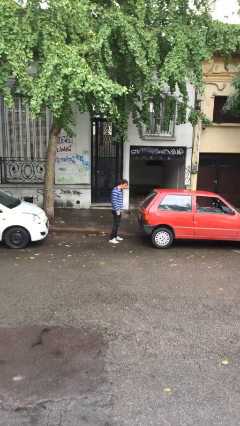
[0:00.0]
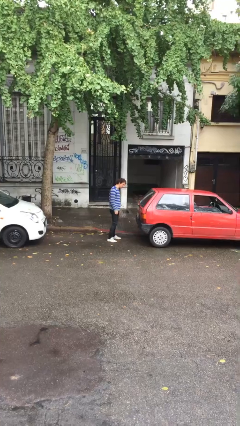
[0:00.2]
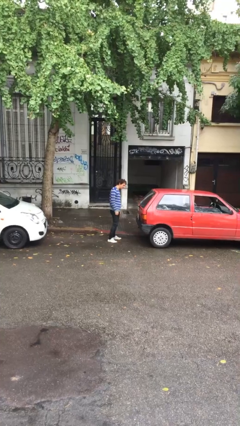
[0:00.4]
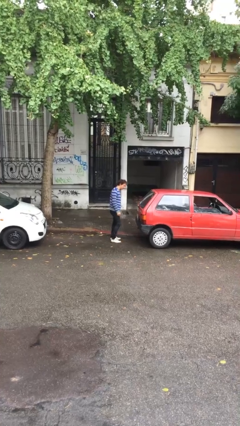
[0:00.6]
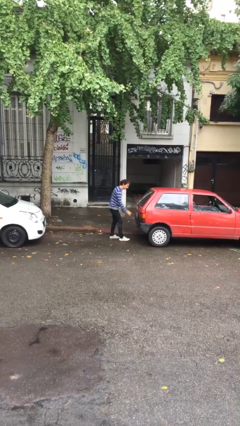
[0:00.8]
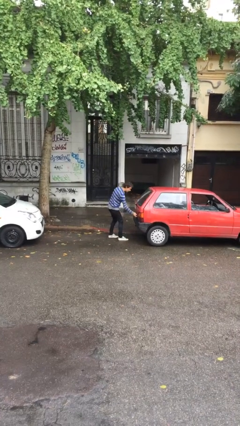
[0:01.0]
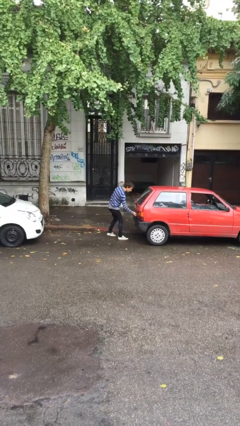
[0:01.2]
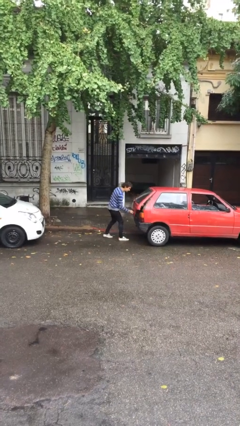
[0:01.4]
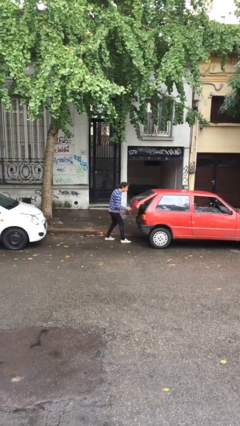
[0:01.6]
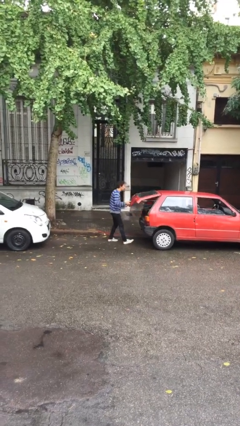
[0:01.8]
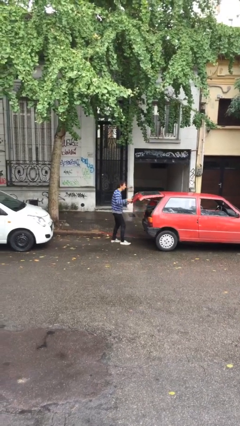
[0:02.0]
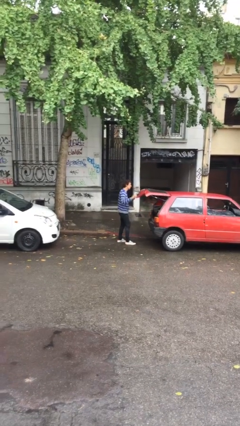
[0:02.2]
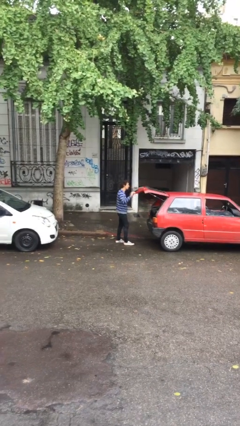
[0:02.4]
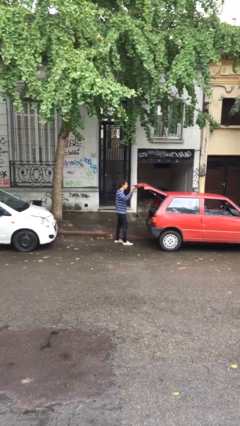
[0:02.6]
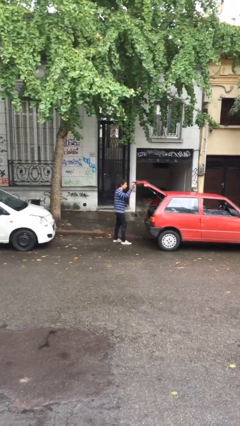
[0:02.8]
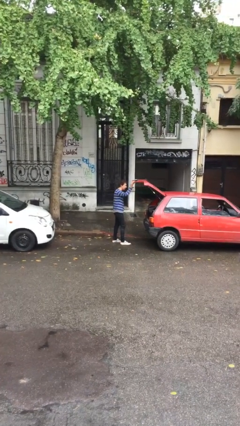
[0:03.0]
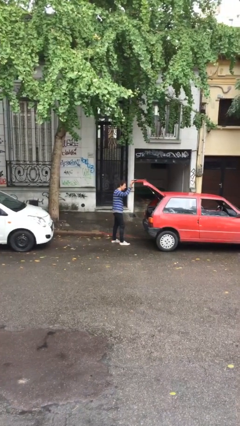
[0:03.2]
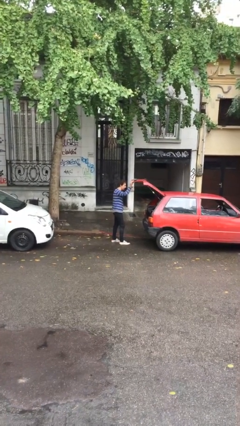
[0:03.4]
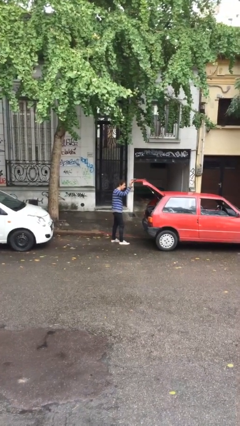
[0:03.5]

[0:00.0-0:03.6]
person opens car trunk

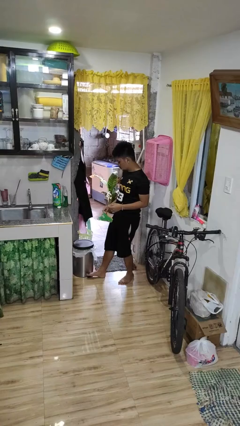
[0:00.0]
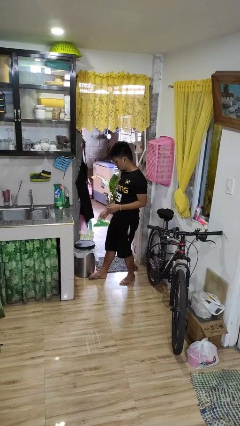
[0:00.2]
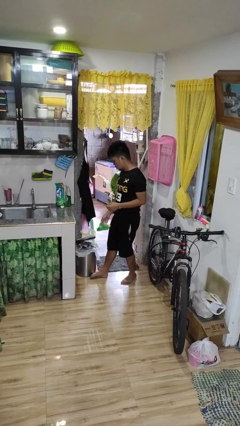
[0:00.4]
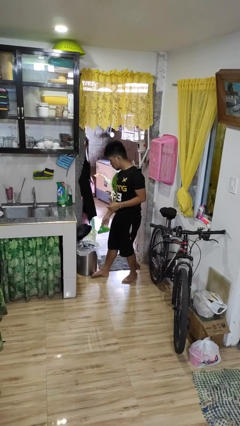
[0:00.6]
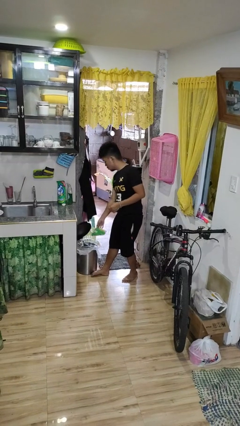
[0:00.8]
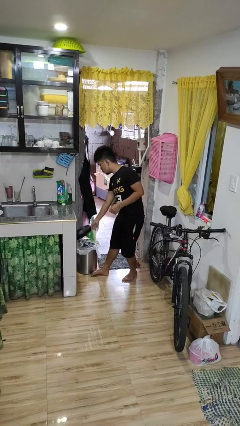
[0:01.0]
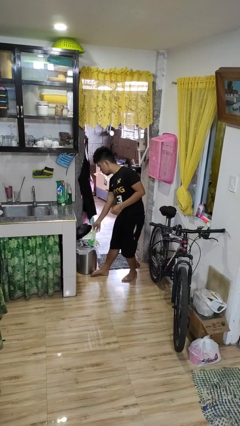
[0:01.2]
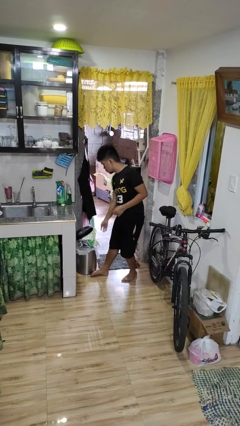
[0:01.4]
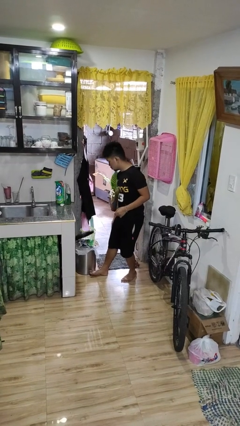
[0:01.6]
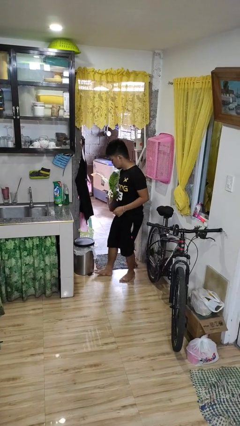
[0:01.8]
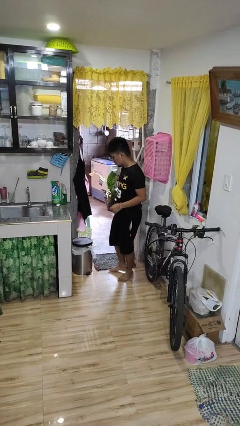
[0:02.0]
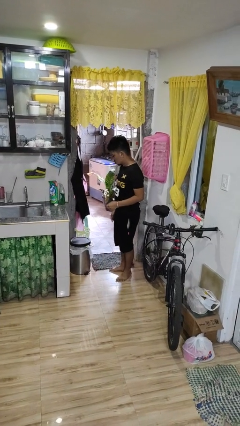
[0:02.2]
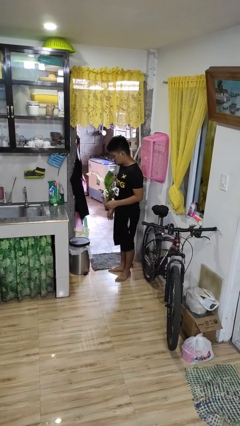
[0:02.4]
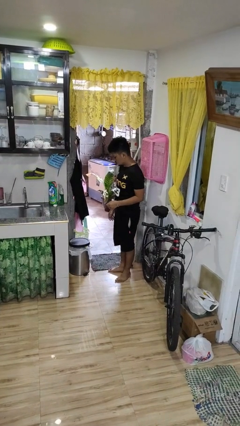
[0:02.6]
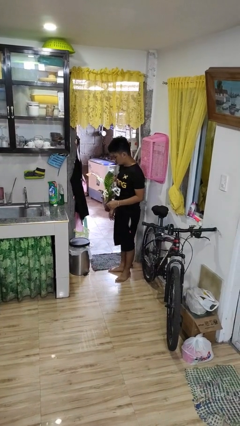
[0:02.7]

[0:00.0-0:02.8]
person discards trash

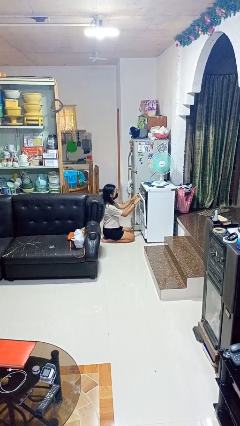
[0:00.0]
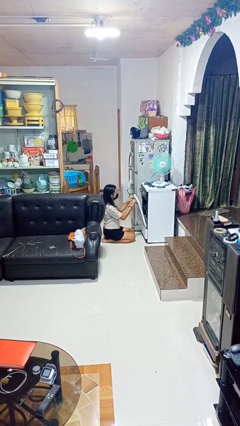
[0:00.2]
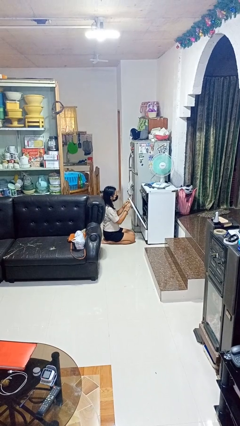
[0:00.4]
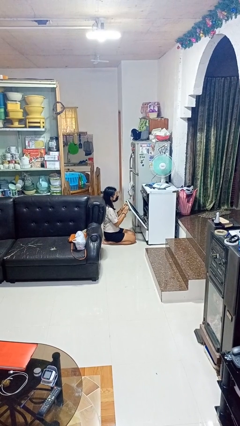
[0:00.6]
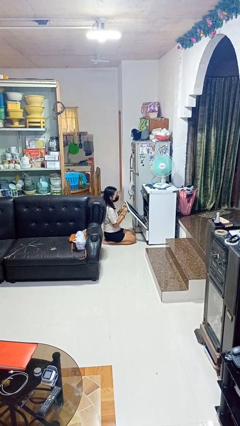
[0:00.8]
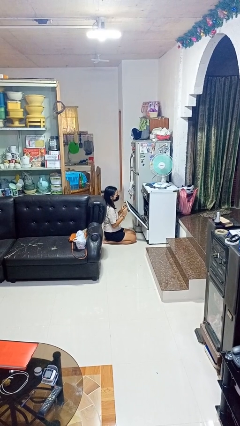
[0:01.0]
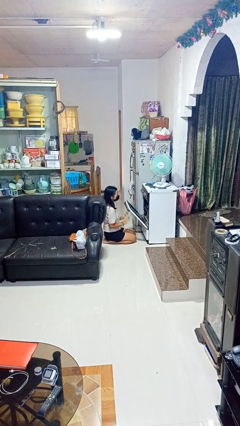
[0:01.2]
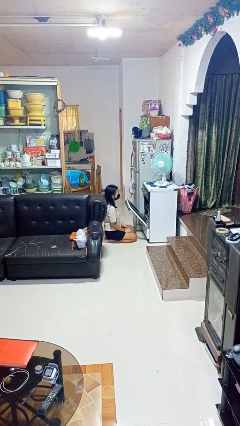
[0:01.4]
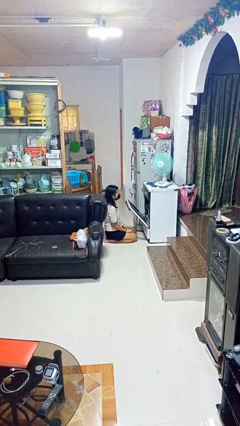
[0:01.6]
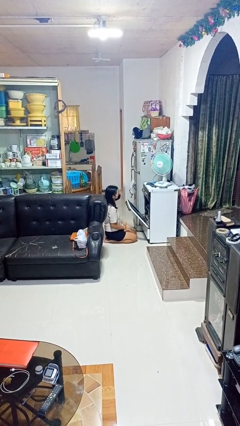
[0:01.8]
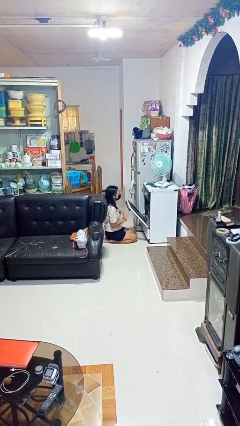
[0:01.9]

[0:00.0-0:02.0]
person opens oven door

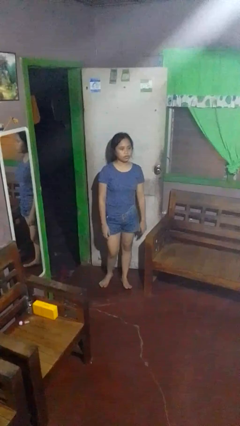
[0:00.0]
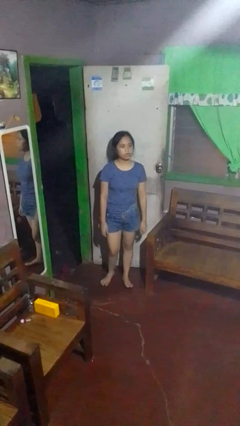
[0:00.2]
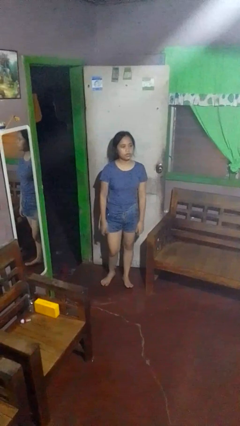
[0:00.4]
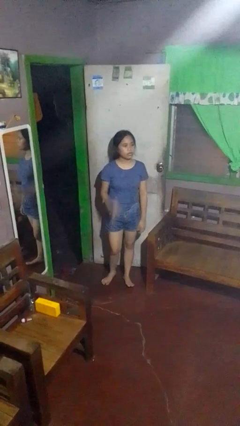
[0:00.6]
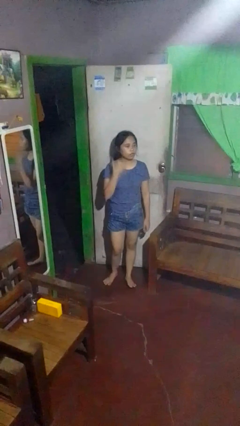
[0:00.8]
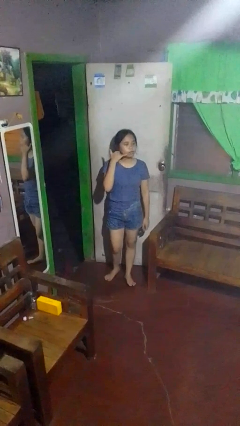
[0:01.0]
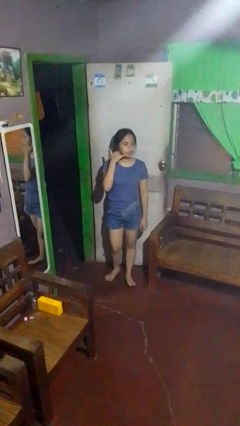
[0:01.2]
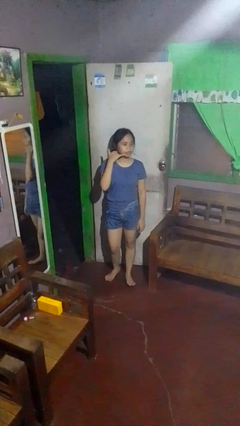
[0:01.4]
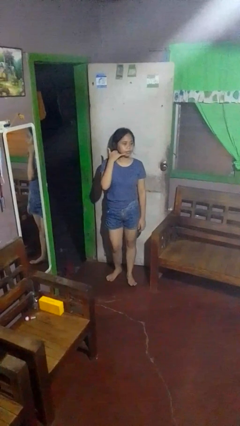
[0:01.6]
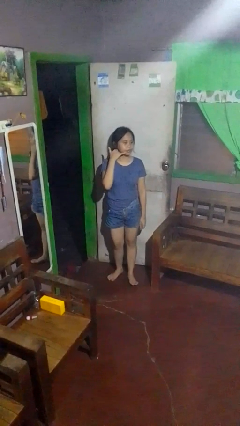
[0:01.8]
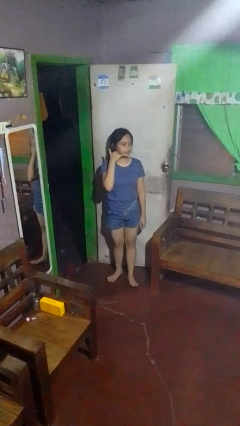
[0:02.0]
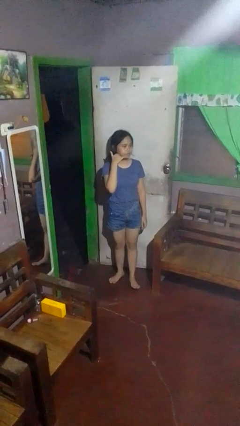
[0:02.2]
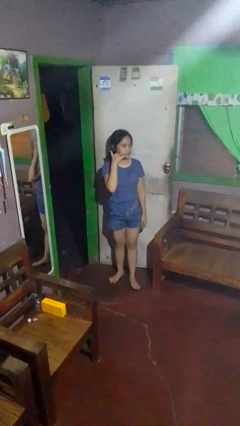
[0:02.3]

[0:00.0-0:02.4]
person gestures call me

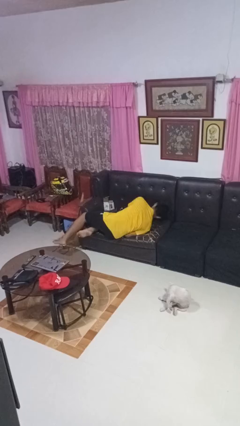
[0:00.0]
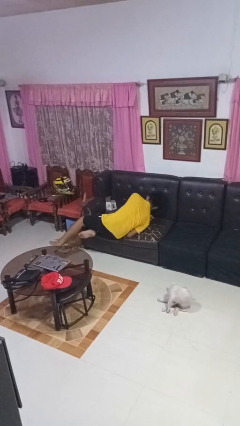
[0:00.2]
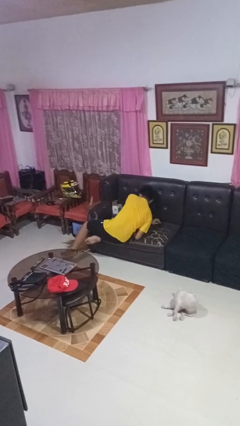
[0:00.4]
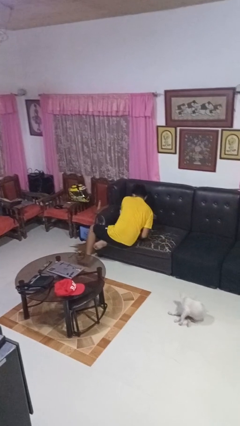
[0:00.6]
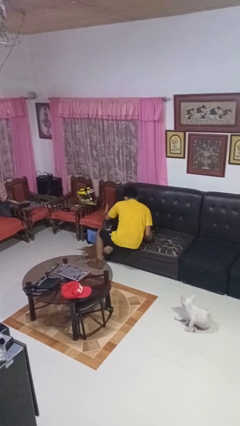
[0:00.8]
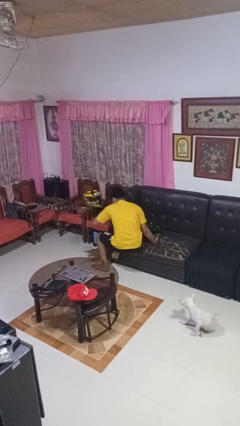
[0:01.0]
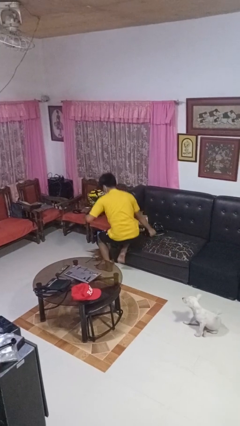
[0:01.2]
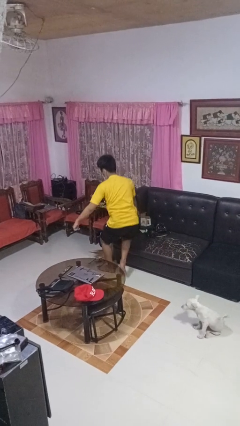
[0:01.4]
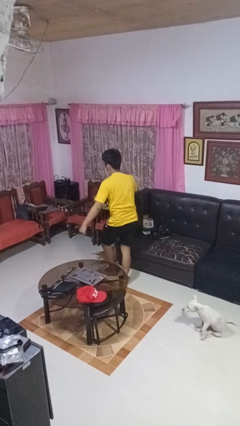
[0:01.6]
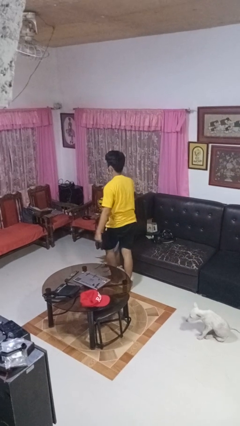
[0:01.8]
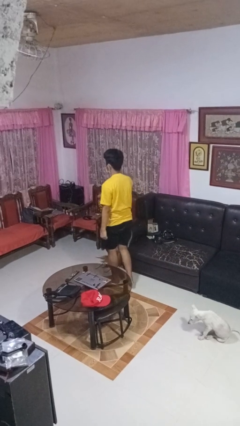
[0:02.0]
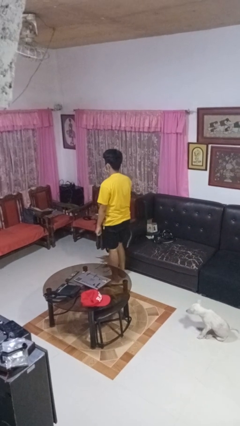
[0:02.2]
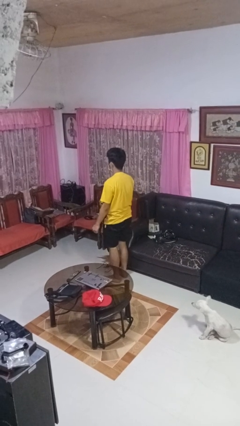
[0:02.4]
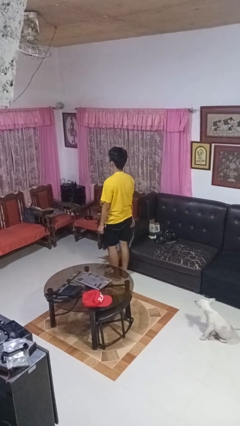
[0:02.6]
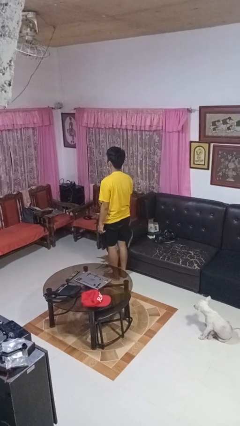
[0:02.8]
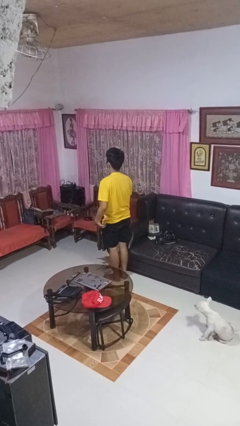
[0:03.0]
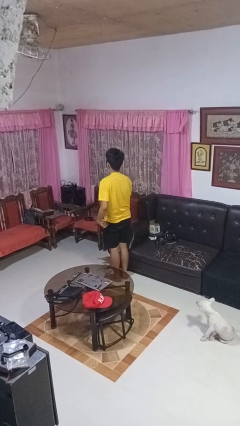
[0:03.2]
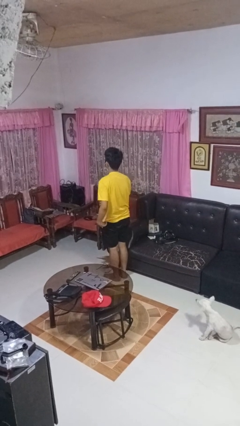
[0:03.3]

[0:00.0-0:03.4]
person stands up

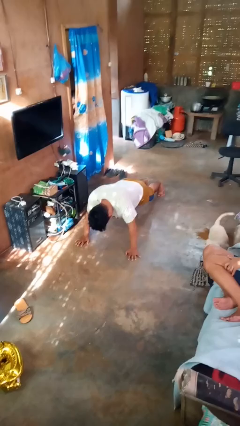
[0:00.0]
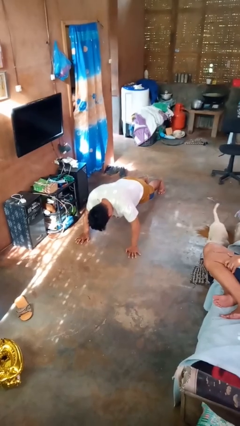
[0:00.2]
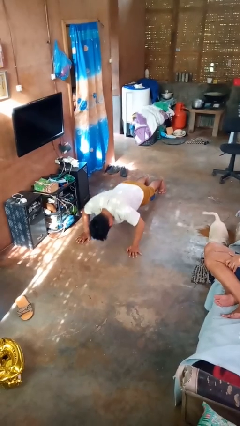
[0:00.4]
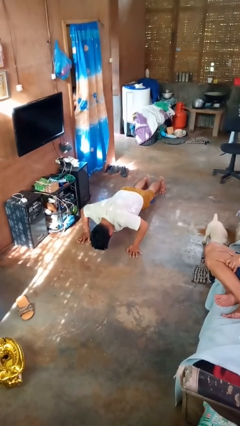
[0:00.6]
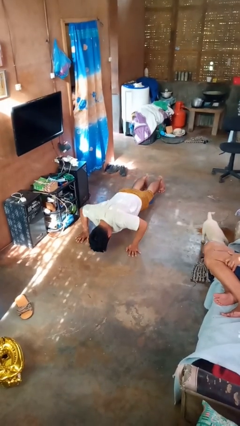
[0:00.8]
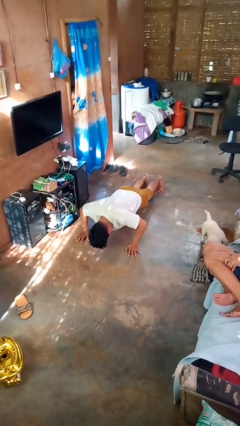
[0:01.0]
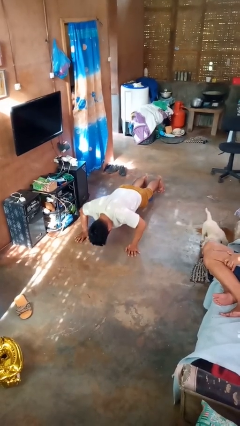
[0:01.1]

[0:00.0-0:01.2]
person exercises with pushup

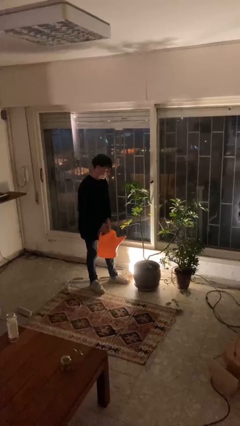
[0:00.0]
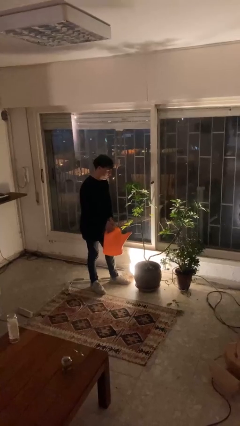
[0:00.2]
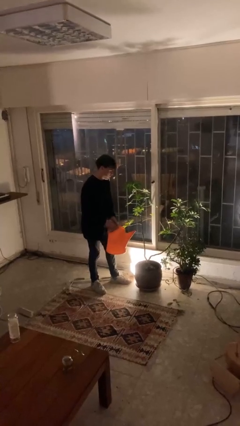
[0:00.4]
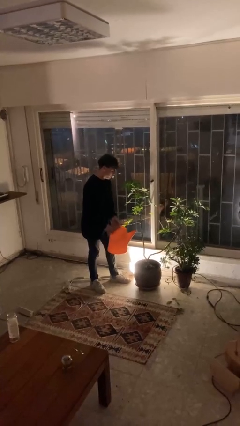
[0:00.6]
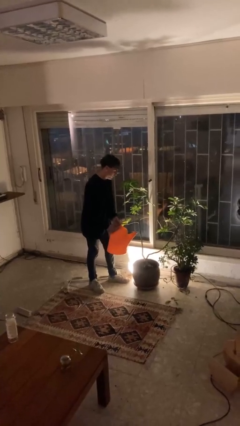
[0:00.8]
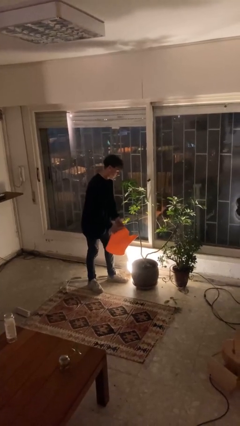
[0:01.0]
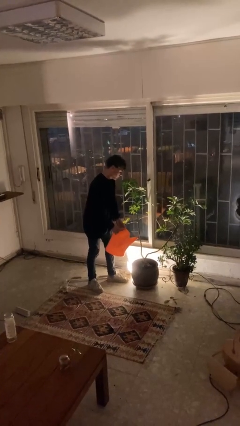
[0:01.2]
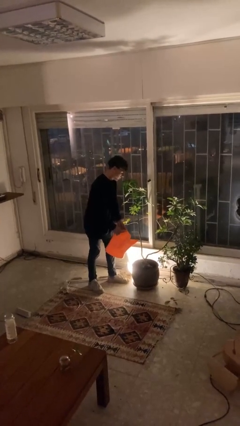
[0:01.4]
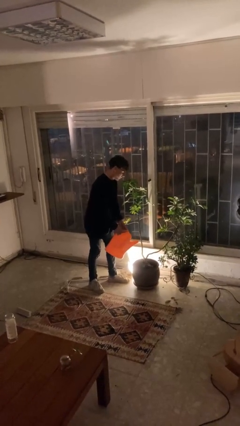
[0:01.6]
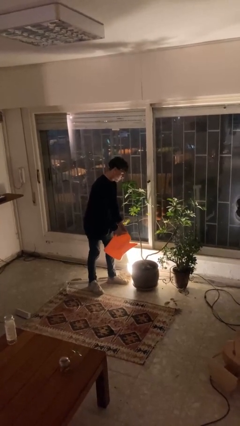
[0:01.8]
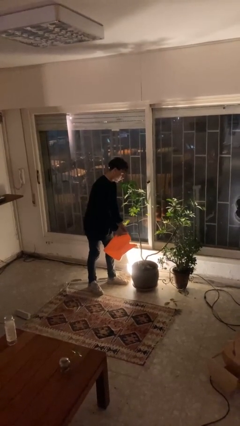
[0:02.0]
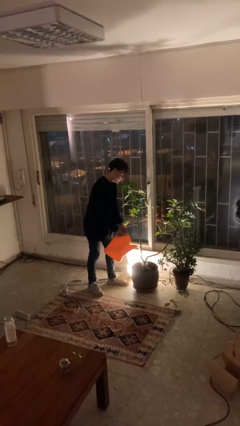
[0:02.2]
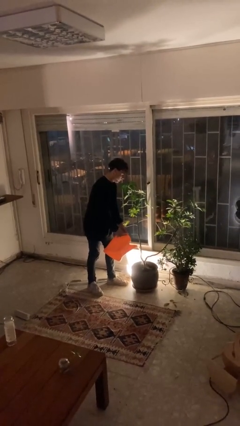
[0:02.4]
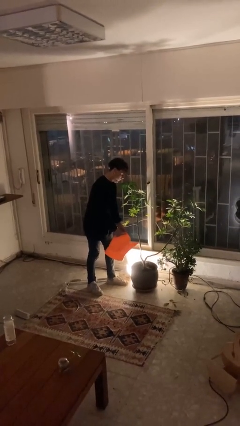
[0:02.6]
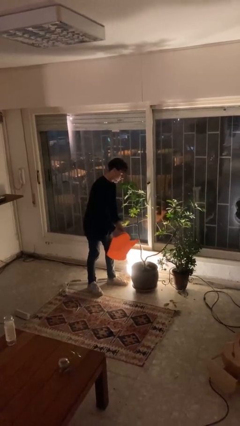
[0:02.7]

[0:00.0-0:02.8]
person waters houseplant
